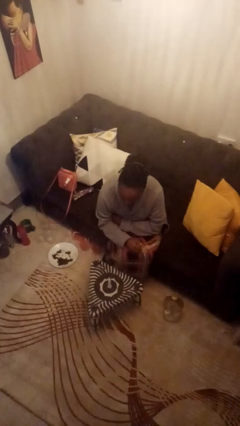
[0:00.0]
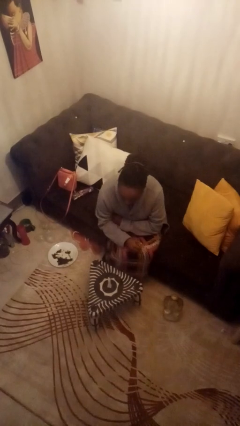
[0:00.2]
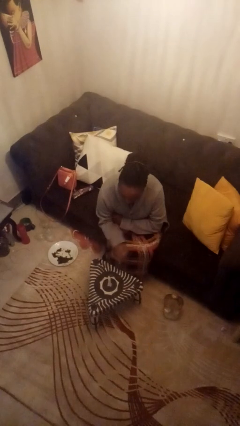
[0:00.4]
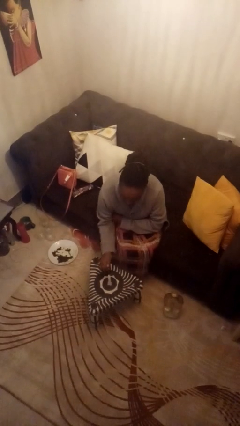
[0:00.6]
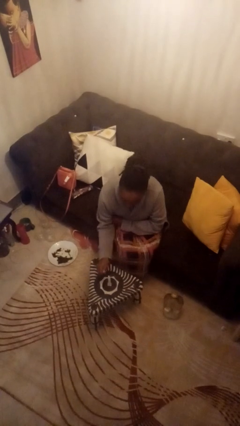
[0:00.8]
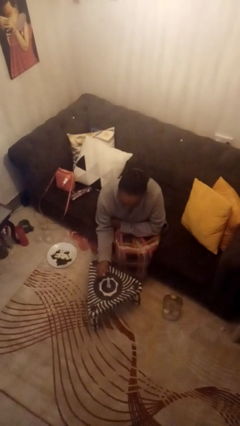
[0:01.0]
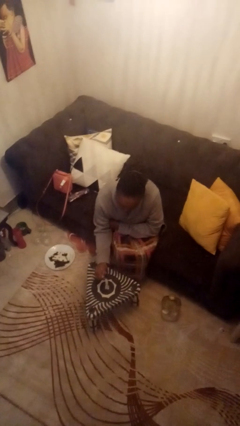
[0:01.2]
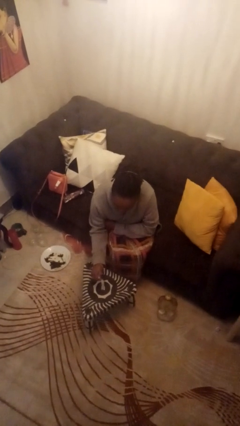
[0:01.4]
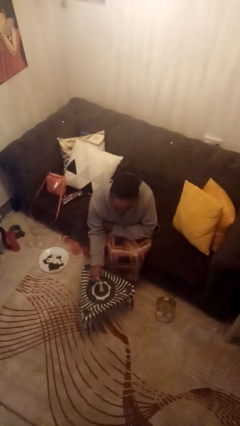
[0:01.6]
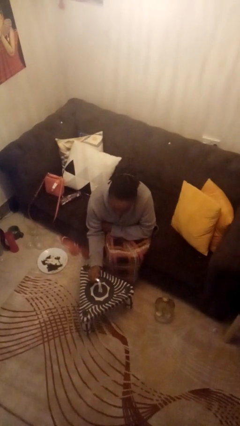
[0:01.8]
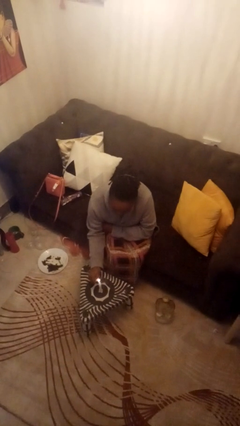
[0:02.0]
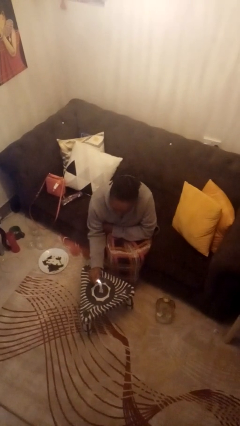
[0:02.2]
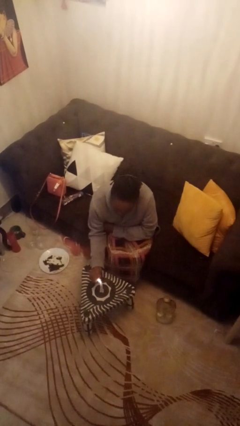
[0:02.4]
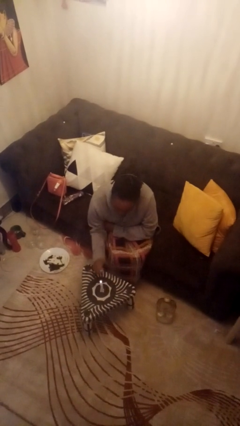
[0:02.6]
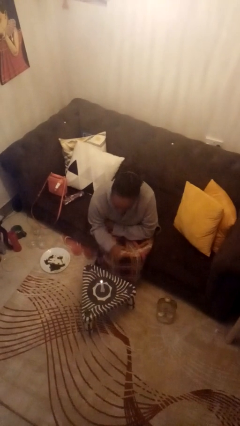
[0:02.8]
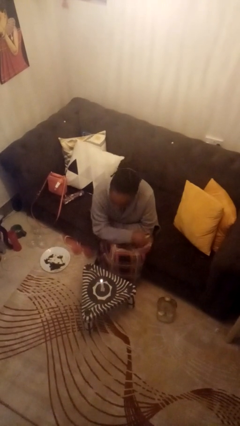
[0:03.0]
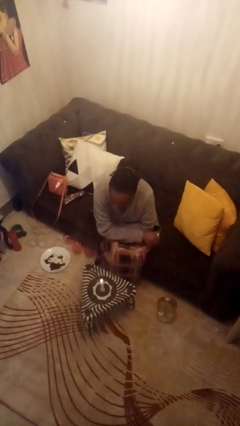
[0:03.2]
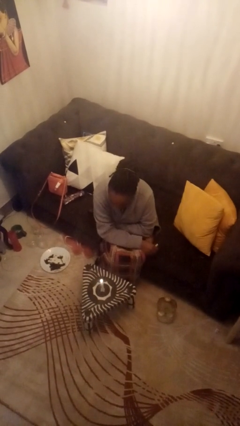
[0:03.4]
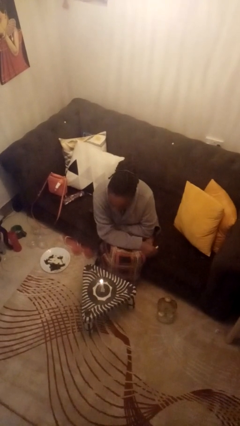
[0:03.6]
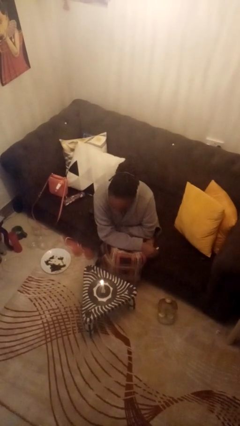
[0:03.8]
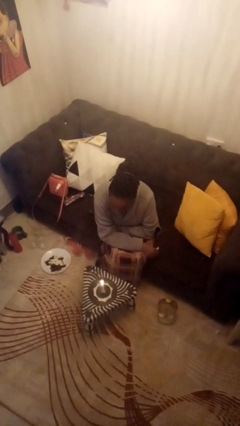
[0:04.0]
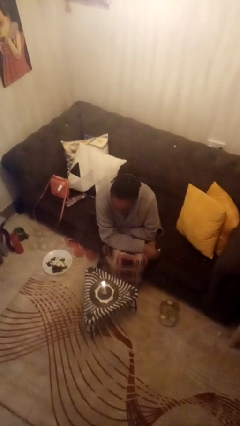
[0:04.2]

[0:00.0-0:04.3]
person lights candle

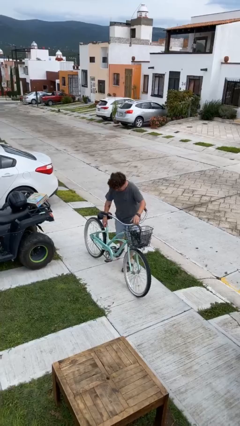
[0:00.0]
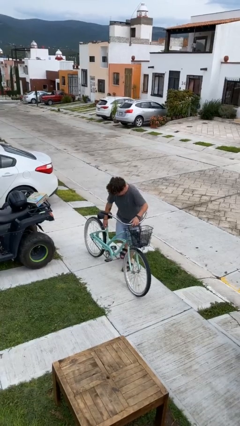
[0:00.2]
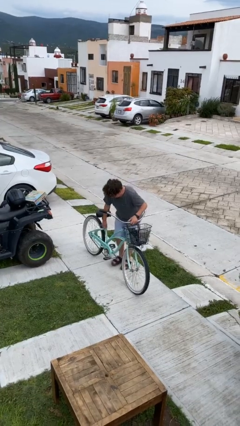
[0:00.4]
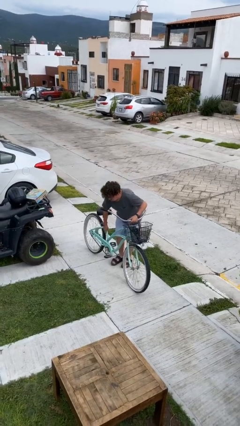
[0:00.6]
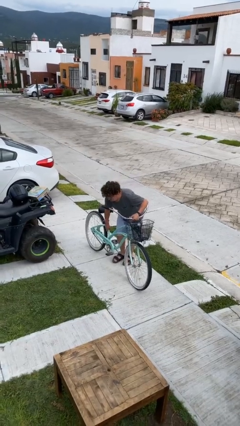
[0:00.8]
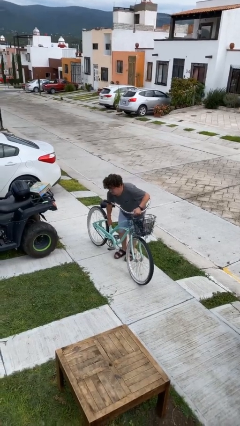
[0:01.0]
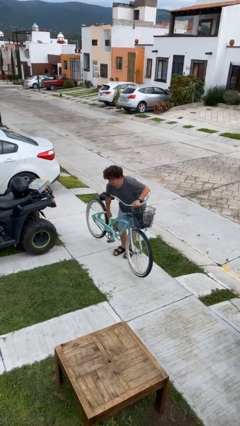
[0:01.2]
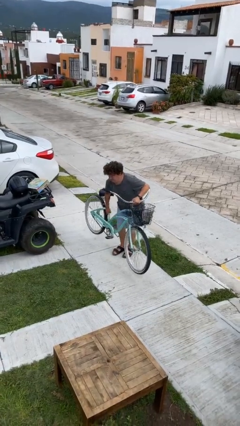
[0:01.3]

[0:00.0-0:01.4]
person picks up object from floor

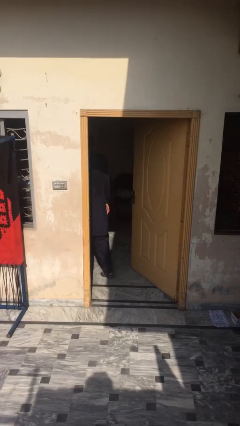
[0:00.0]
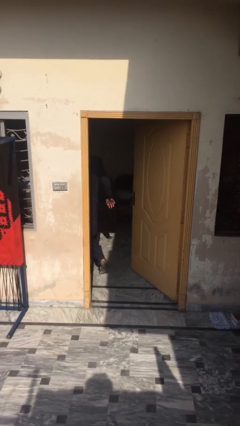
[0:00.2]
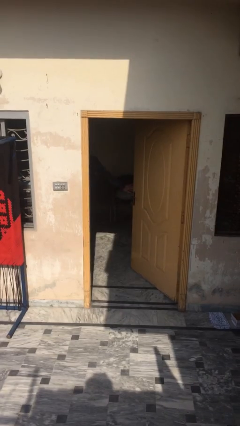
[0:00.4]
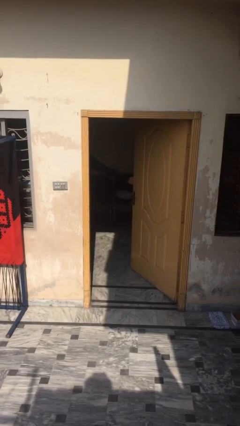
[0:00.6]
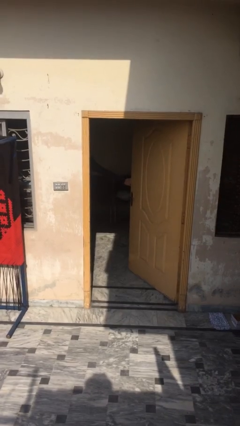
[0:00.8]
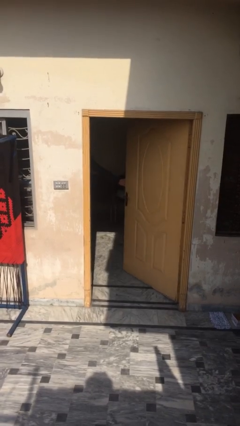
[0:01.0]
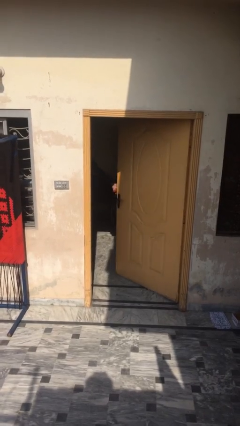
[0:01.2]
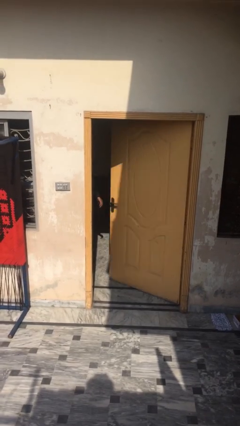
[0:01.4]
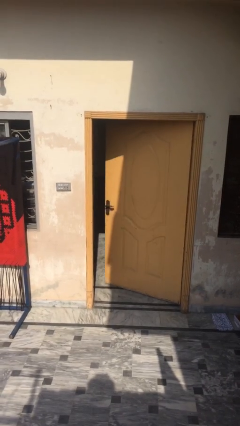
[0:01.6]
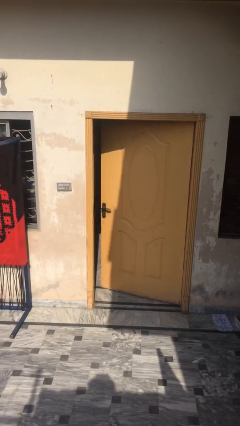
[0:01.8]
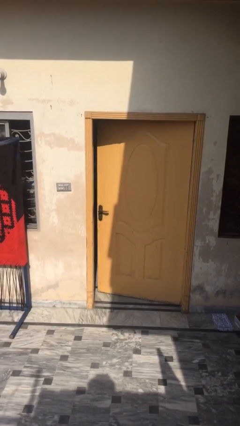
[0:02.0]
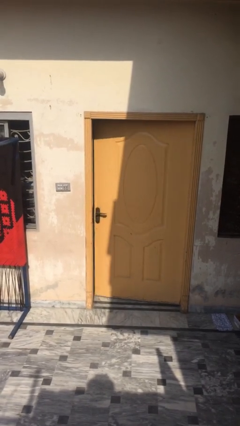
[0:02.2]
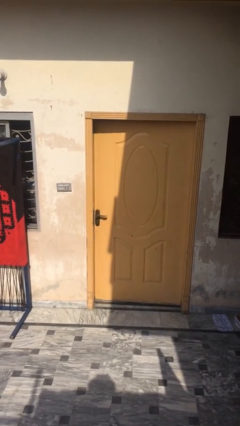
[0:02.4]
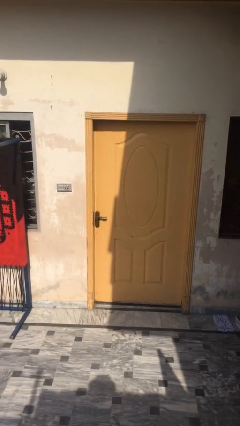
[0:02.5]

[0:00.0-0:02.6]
person closes facility door

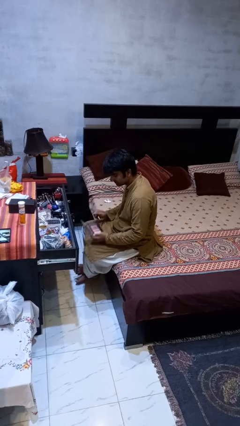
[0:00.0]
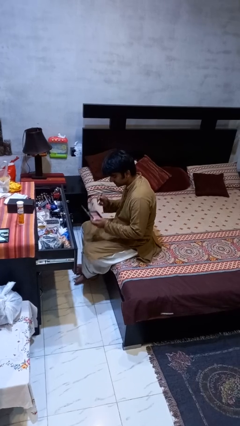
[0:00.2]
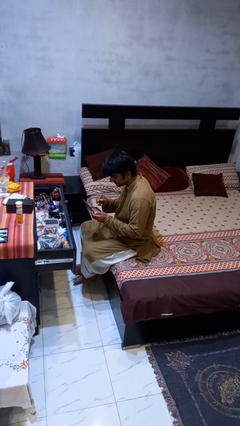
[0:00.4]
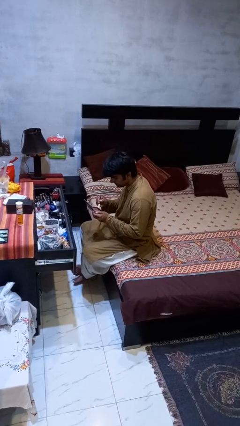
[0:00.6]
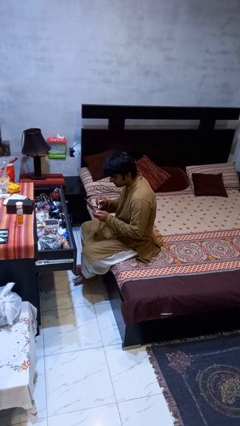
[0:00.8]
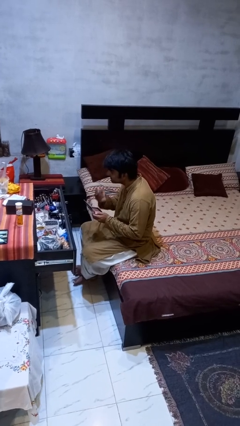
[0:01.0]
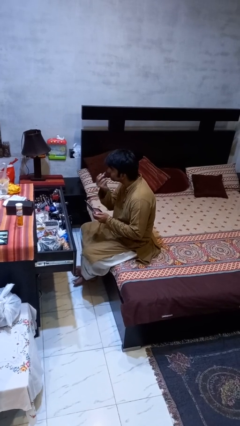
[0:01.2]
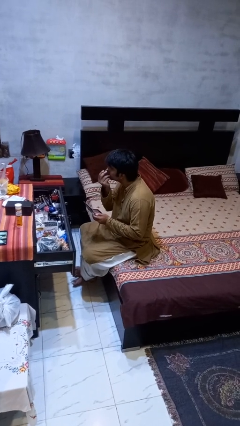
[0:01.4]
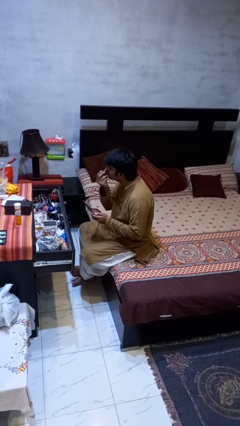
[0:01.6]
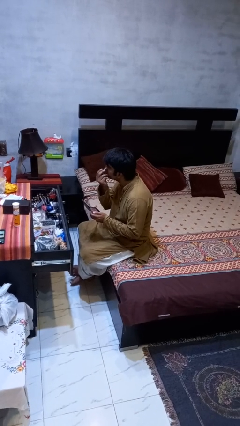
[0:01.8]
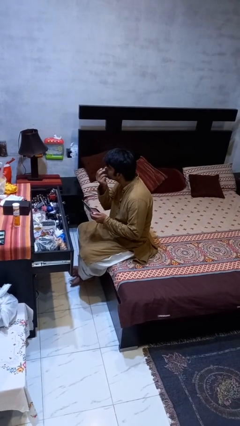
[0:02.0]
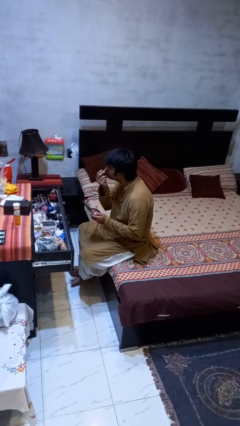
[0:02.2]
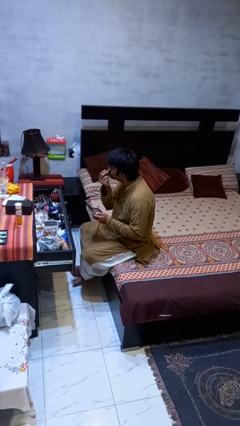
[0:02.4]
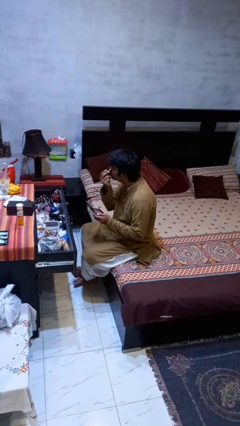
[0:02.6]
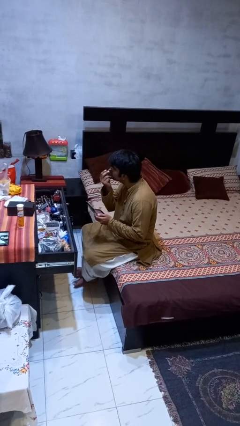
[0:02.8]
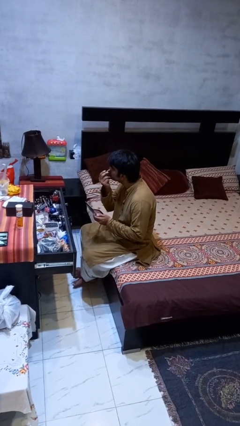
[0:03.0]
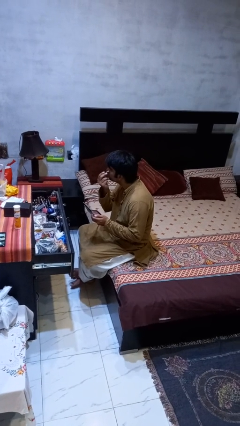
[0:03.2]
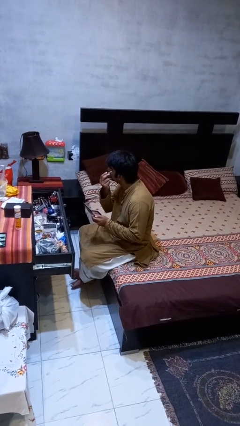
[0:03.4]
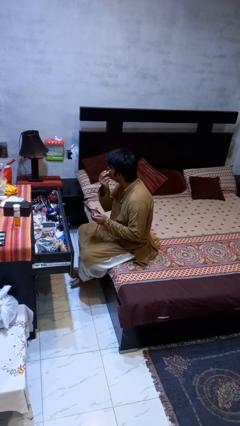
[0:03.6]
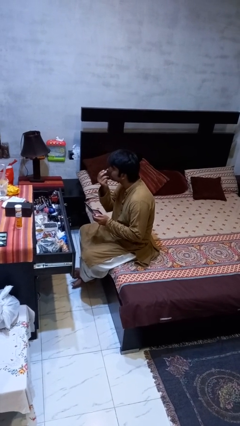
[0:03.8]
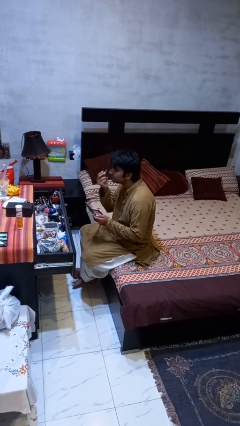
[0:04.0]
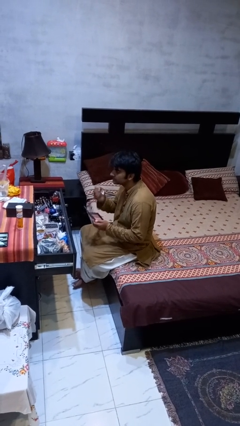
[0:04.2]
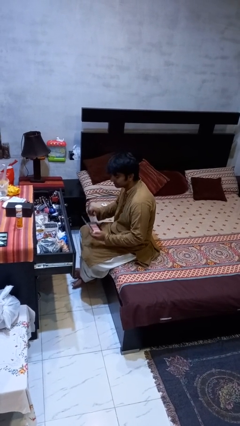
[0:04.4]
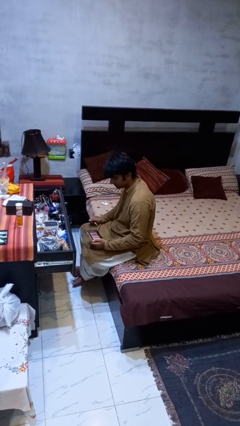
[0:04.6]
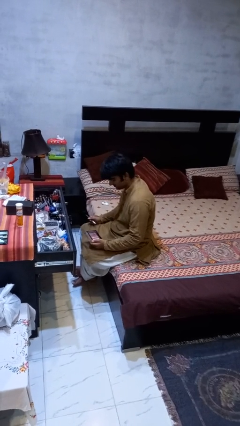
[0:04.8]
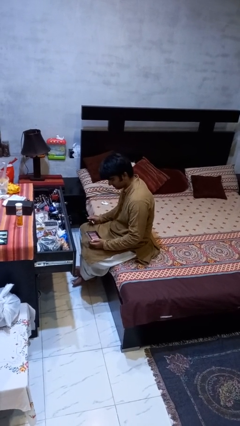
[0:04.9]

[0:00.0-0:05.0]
person applies eye makeup

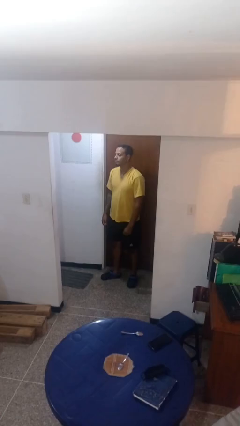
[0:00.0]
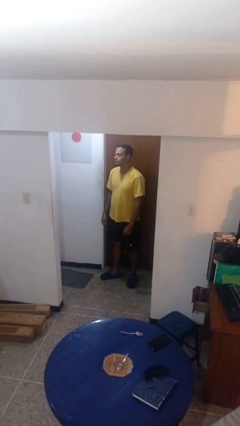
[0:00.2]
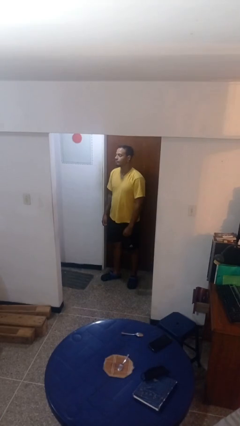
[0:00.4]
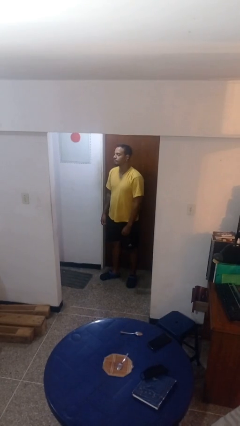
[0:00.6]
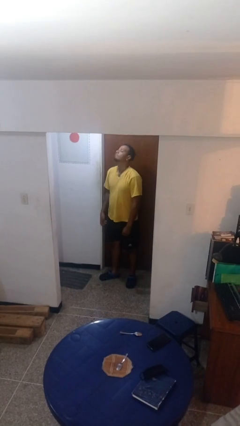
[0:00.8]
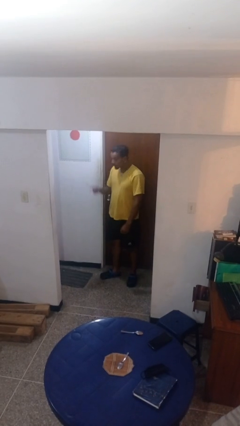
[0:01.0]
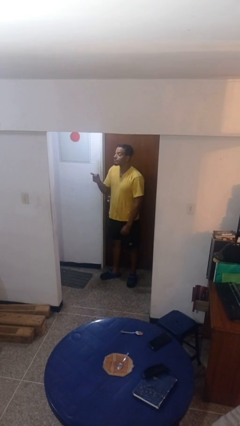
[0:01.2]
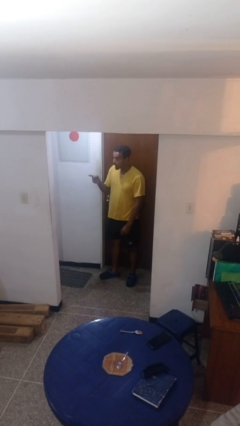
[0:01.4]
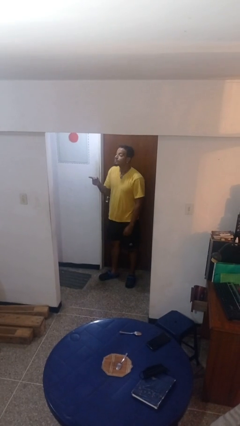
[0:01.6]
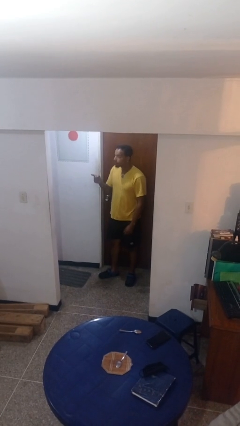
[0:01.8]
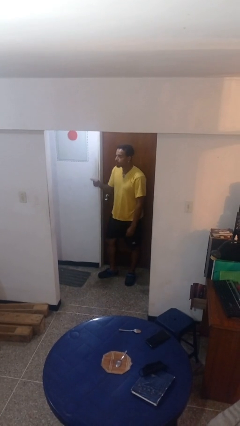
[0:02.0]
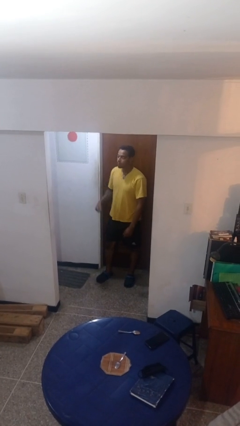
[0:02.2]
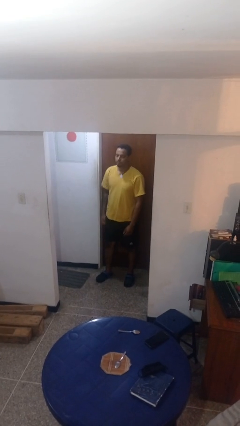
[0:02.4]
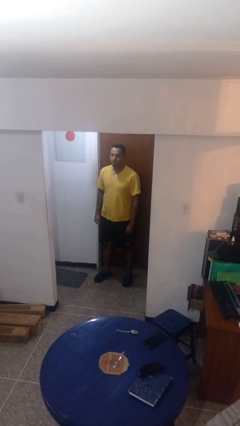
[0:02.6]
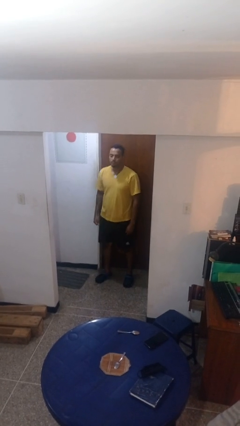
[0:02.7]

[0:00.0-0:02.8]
person nods head

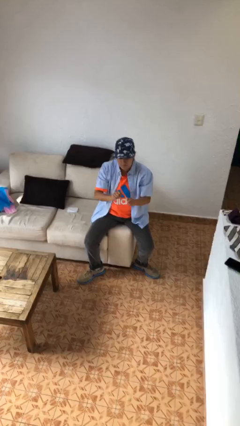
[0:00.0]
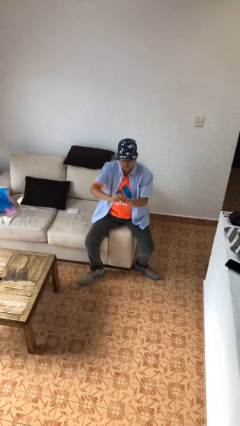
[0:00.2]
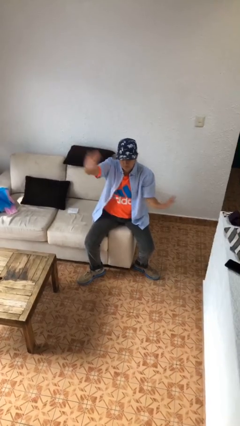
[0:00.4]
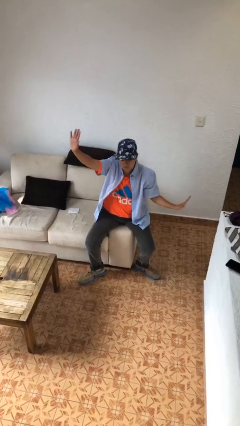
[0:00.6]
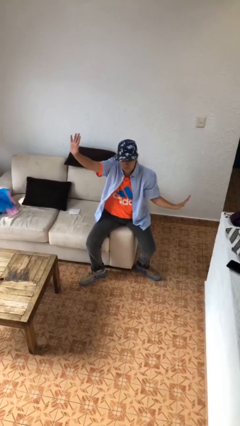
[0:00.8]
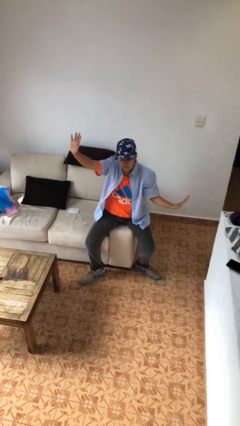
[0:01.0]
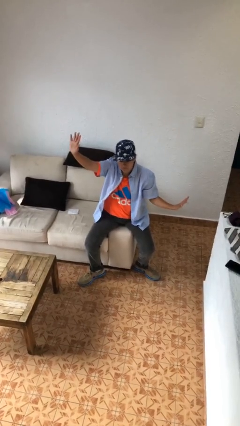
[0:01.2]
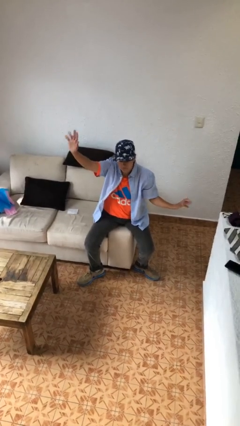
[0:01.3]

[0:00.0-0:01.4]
person gestures zoom in
